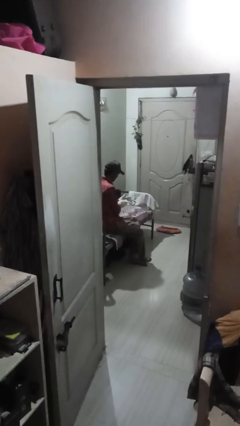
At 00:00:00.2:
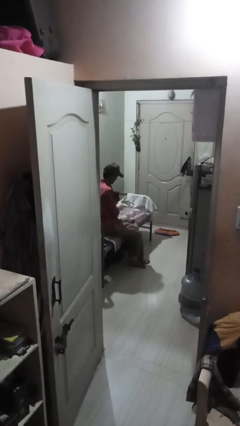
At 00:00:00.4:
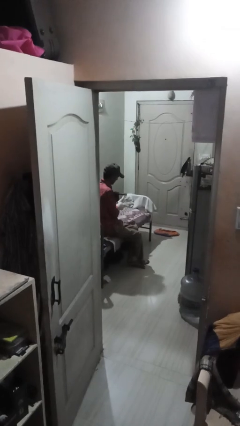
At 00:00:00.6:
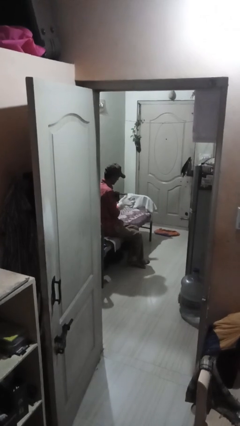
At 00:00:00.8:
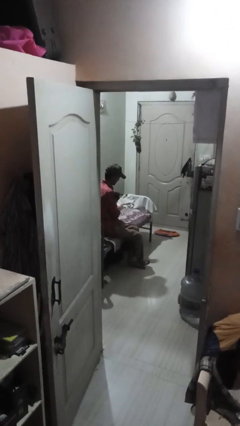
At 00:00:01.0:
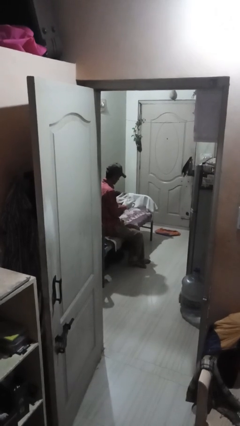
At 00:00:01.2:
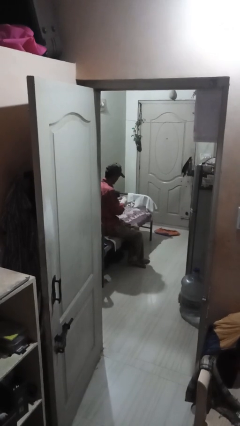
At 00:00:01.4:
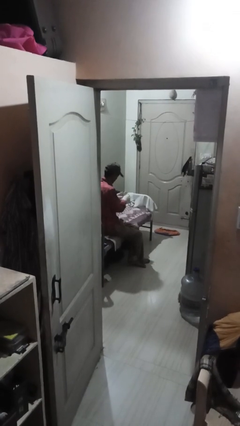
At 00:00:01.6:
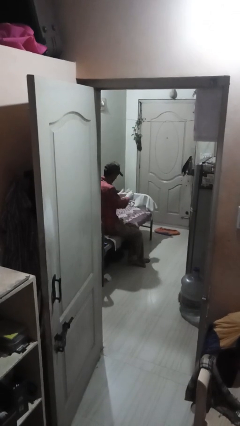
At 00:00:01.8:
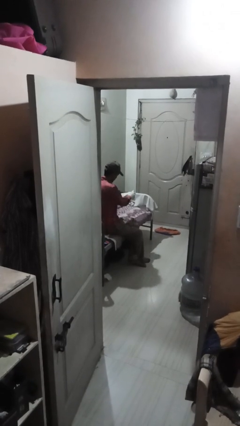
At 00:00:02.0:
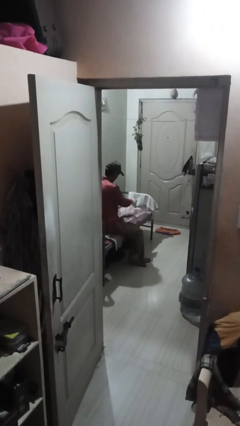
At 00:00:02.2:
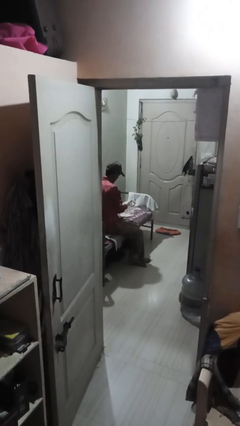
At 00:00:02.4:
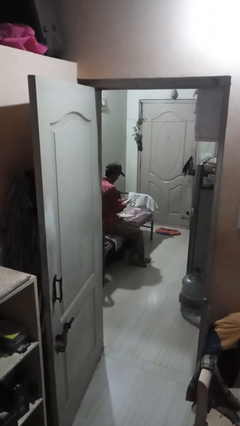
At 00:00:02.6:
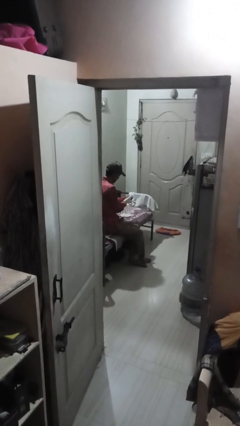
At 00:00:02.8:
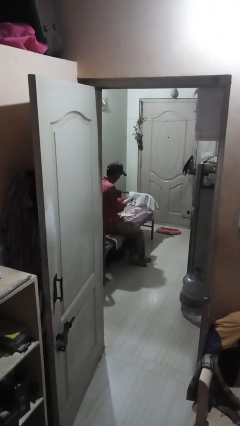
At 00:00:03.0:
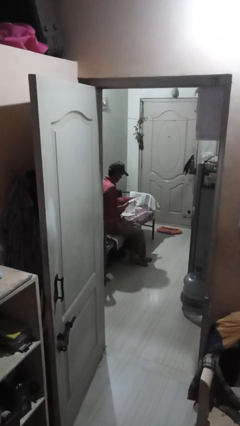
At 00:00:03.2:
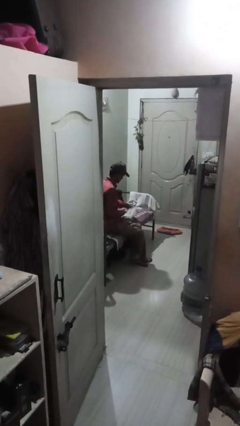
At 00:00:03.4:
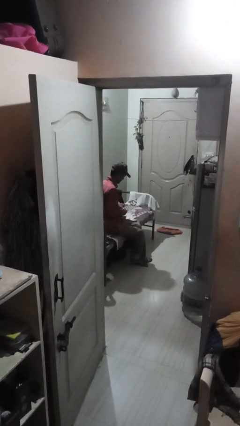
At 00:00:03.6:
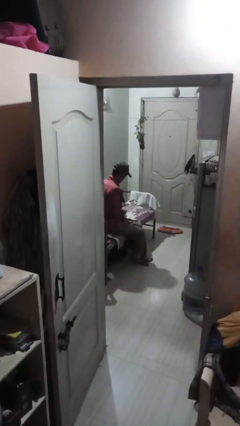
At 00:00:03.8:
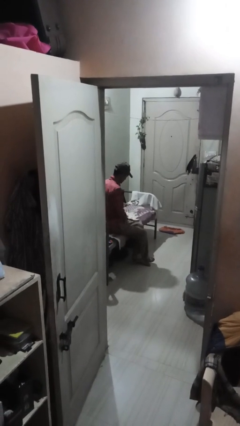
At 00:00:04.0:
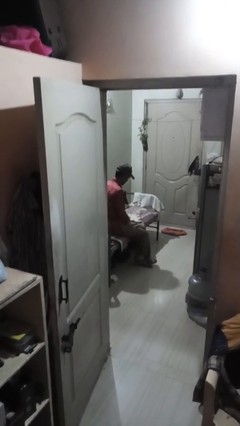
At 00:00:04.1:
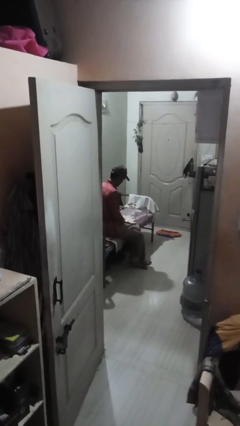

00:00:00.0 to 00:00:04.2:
person takes off gloves

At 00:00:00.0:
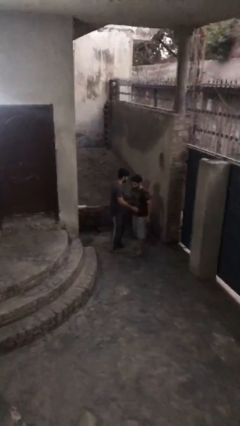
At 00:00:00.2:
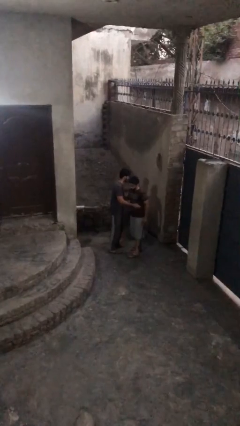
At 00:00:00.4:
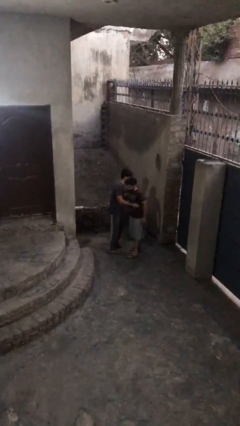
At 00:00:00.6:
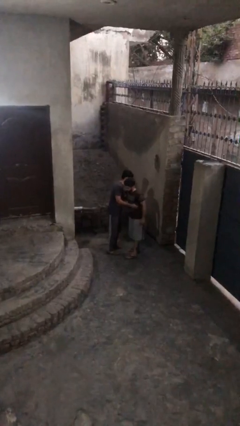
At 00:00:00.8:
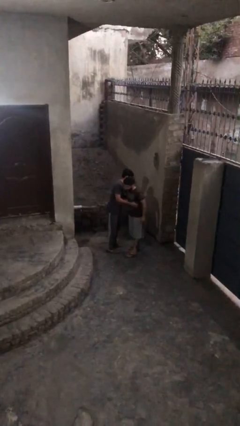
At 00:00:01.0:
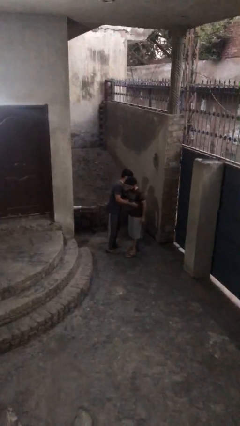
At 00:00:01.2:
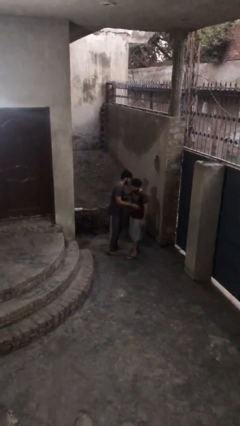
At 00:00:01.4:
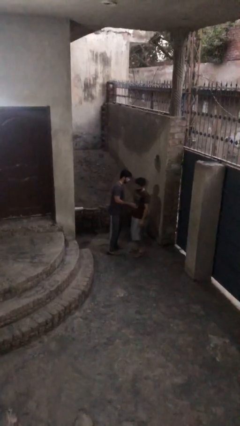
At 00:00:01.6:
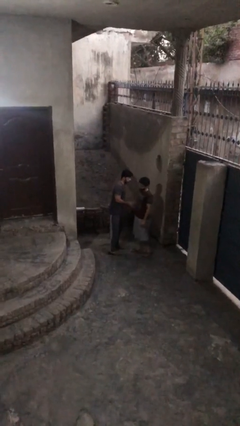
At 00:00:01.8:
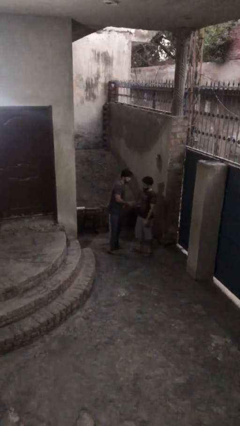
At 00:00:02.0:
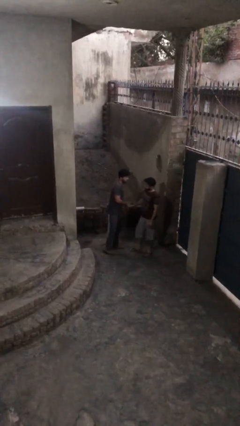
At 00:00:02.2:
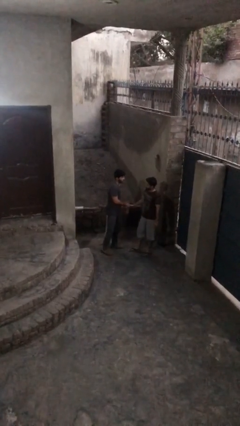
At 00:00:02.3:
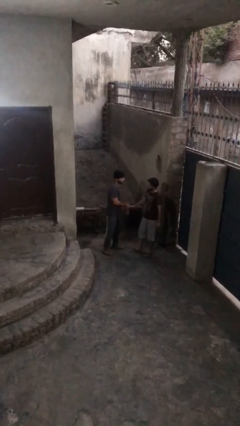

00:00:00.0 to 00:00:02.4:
person embraces person

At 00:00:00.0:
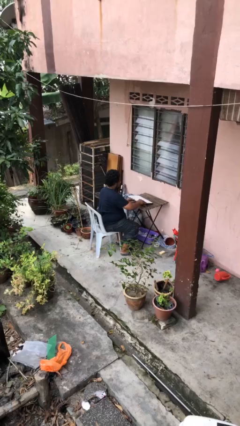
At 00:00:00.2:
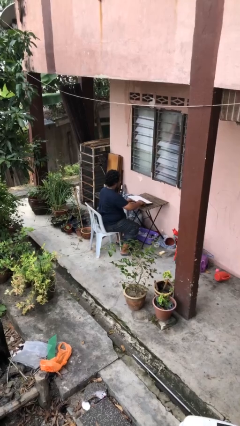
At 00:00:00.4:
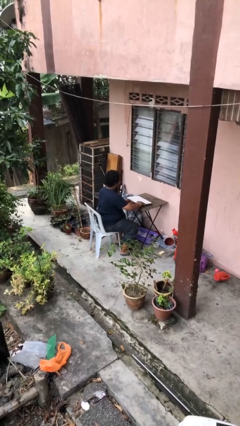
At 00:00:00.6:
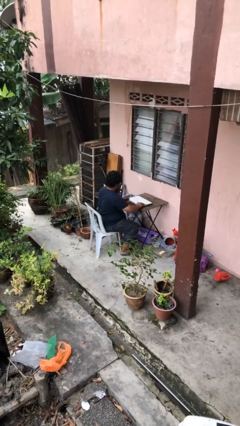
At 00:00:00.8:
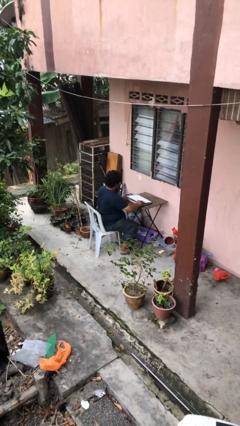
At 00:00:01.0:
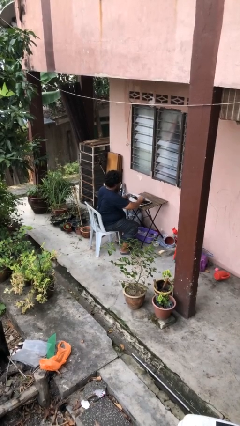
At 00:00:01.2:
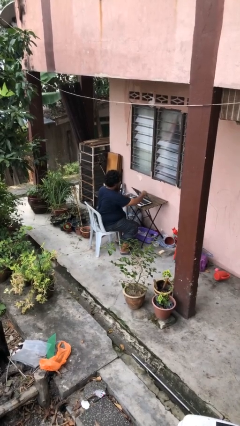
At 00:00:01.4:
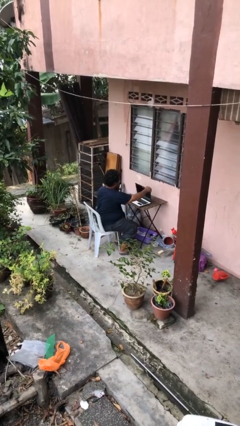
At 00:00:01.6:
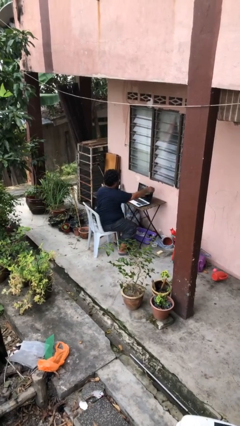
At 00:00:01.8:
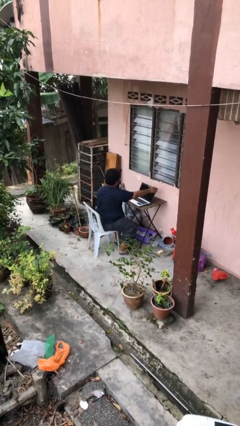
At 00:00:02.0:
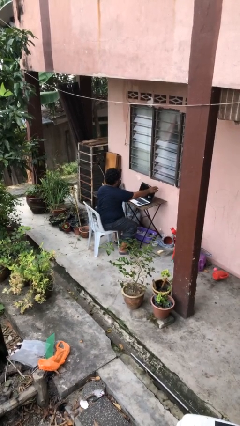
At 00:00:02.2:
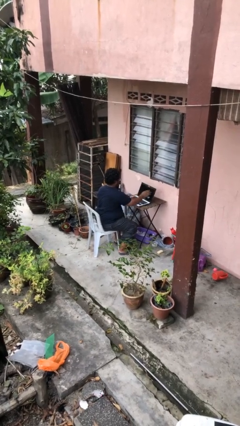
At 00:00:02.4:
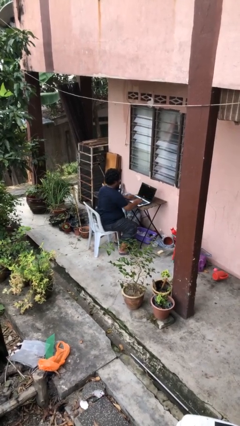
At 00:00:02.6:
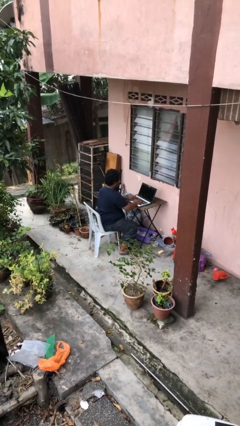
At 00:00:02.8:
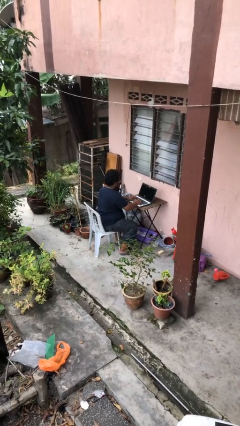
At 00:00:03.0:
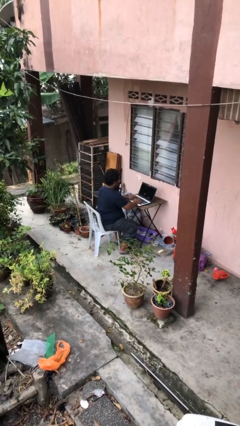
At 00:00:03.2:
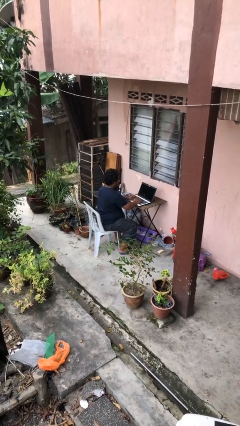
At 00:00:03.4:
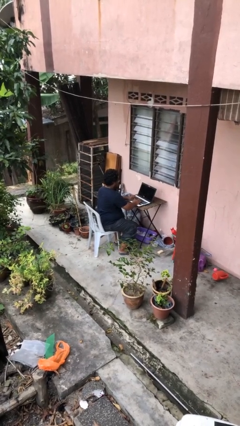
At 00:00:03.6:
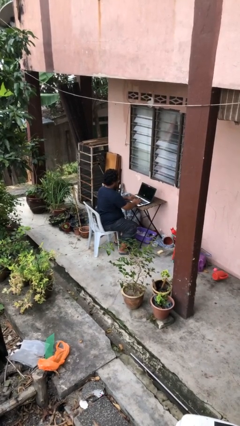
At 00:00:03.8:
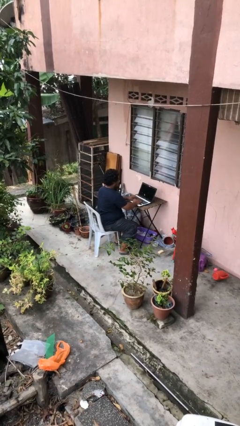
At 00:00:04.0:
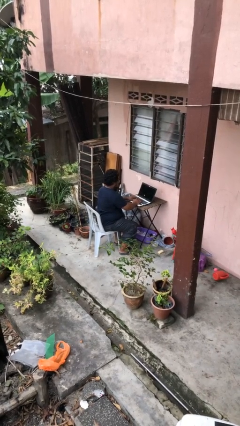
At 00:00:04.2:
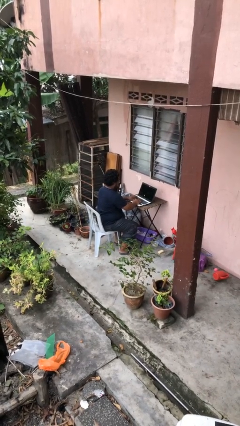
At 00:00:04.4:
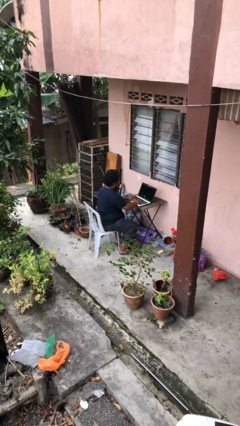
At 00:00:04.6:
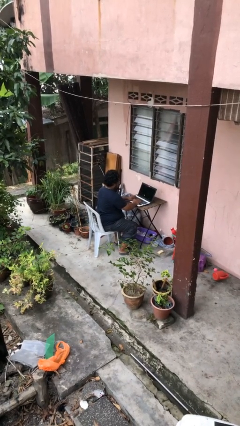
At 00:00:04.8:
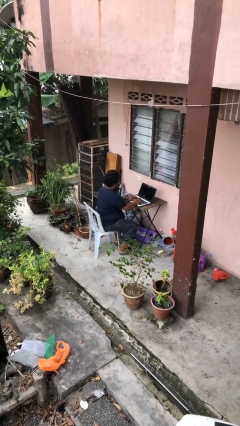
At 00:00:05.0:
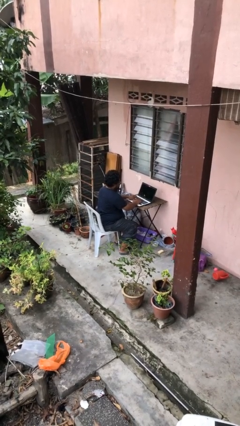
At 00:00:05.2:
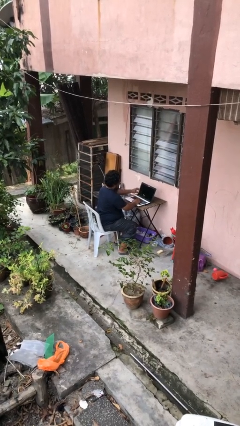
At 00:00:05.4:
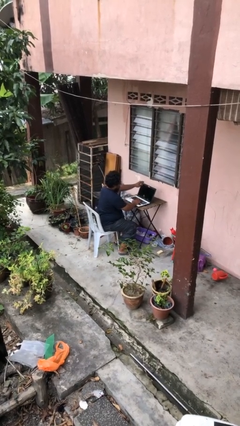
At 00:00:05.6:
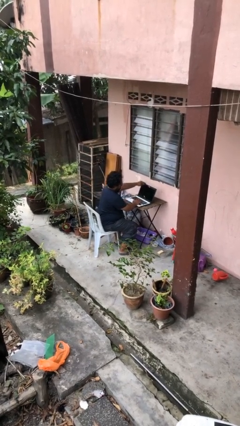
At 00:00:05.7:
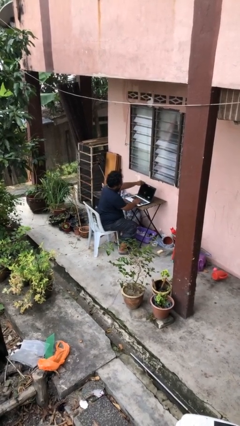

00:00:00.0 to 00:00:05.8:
person interacts with laptop

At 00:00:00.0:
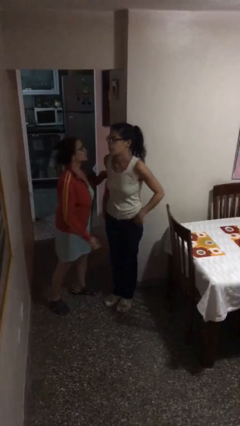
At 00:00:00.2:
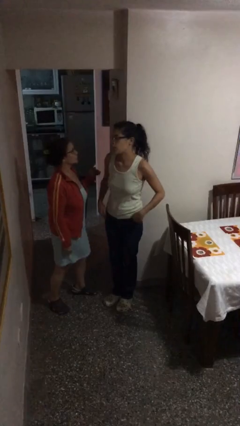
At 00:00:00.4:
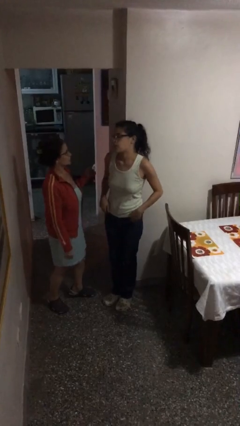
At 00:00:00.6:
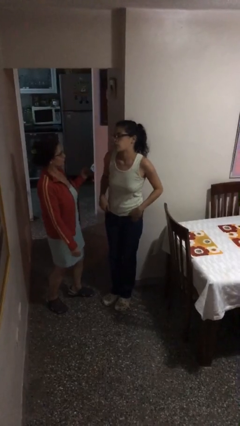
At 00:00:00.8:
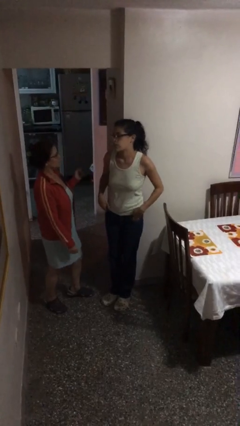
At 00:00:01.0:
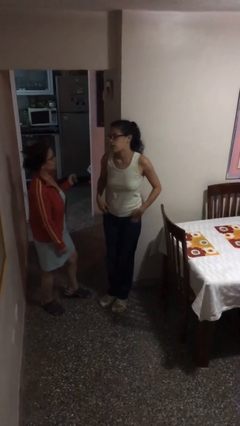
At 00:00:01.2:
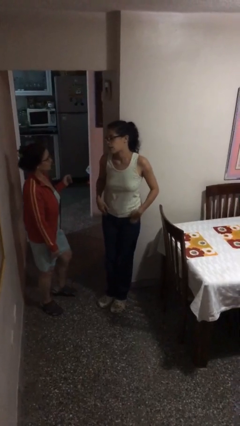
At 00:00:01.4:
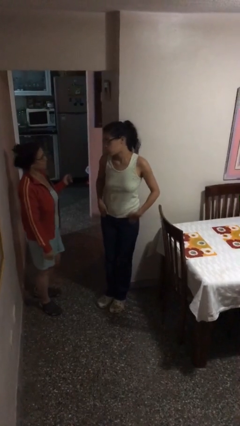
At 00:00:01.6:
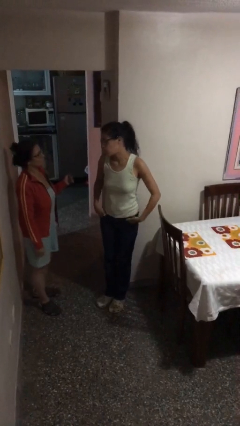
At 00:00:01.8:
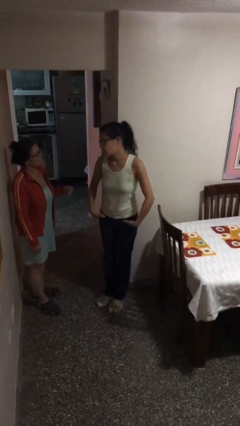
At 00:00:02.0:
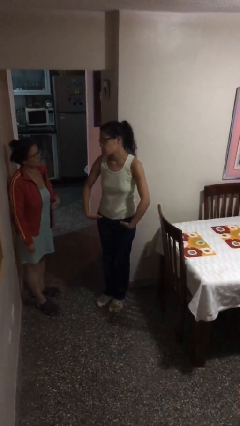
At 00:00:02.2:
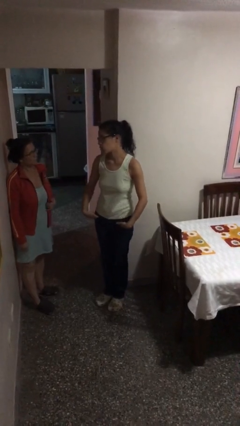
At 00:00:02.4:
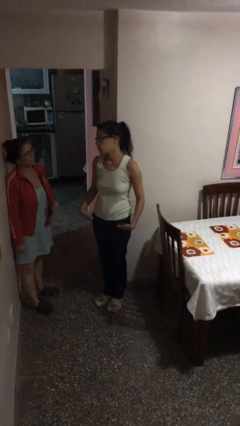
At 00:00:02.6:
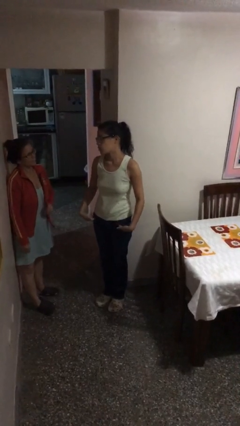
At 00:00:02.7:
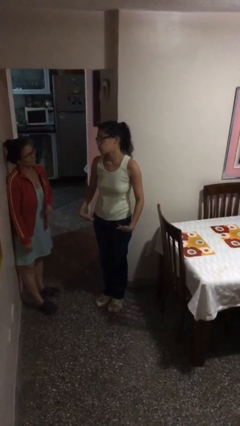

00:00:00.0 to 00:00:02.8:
person talks to person

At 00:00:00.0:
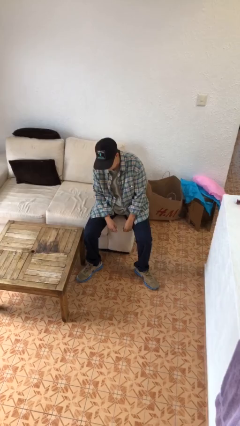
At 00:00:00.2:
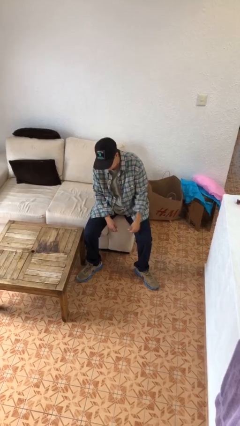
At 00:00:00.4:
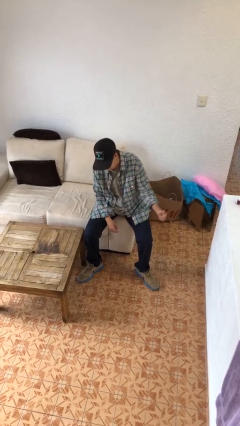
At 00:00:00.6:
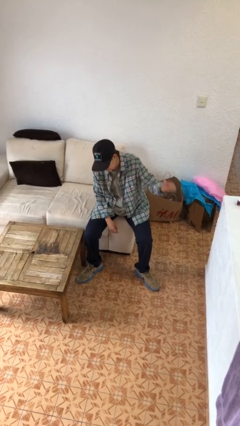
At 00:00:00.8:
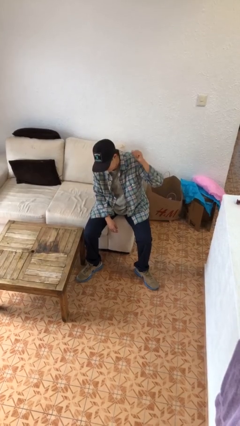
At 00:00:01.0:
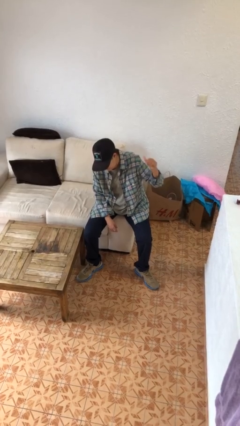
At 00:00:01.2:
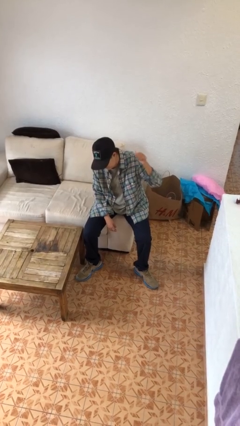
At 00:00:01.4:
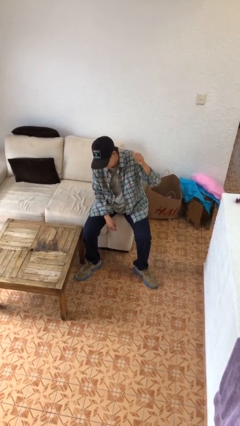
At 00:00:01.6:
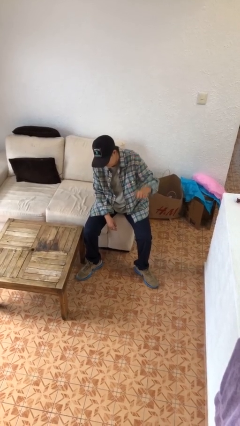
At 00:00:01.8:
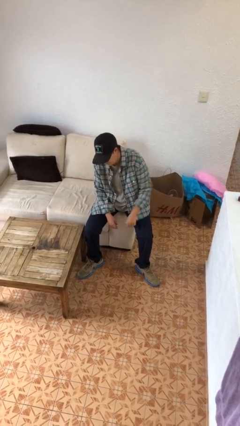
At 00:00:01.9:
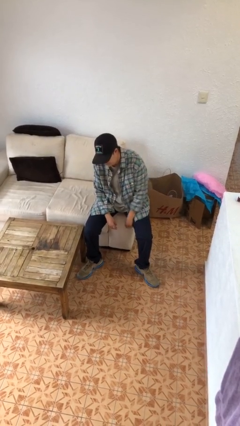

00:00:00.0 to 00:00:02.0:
person gestures behind me

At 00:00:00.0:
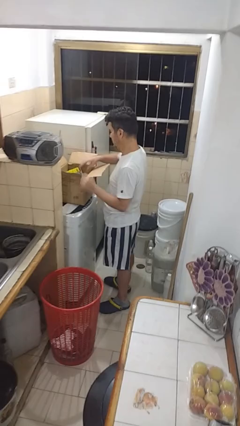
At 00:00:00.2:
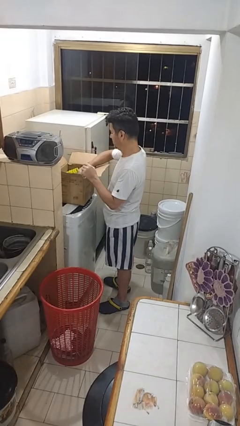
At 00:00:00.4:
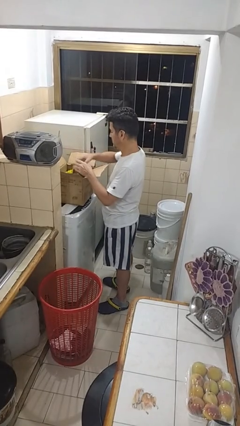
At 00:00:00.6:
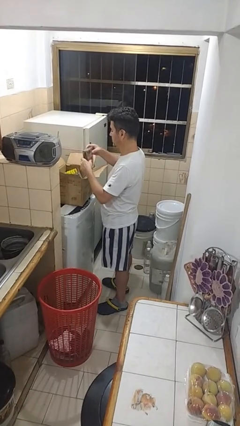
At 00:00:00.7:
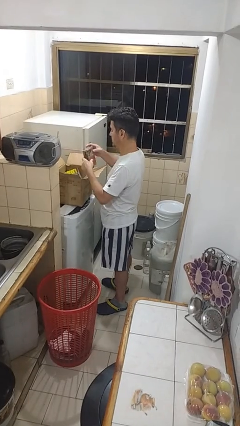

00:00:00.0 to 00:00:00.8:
person takes object from box
